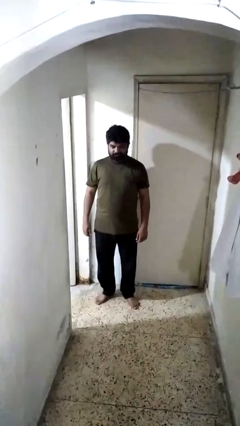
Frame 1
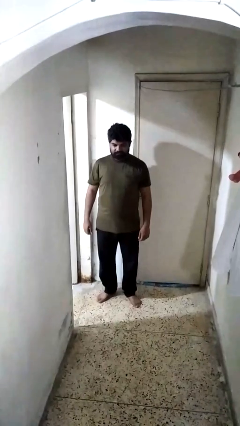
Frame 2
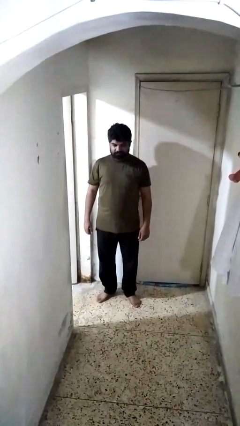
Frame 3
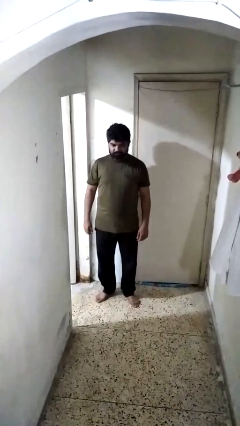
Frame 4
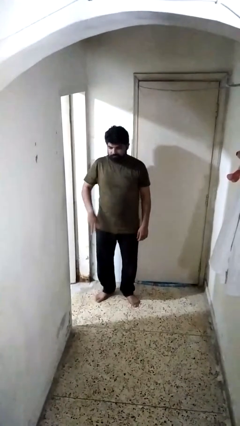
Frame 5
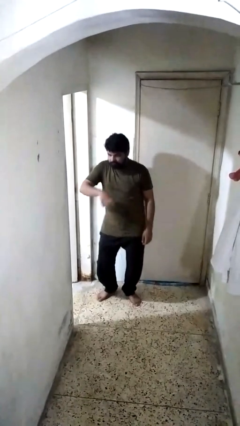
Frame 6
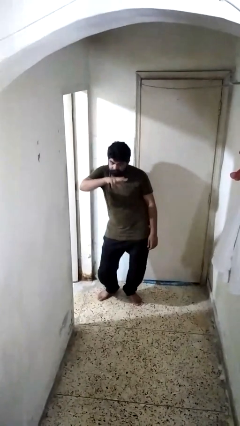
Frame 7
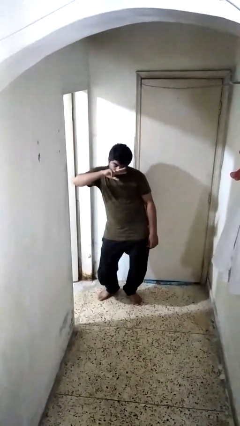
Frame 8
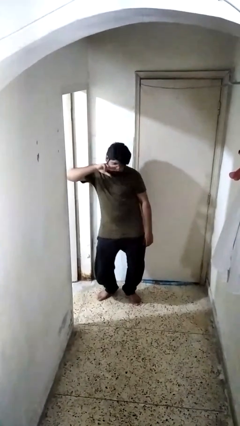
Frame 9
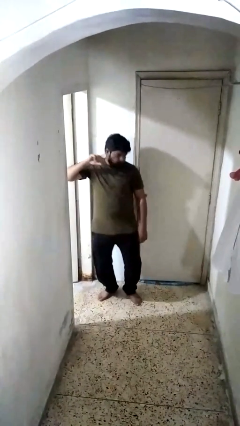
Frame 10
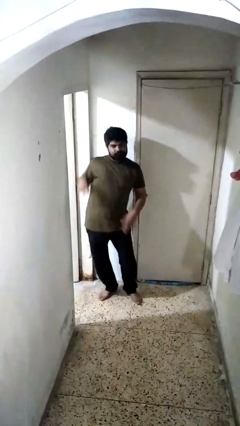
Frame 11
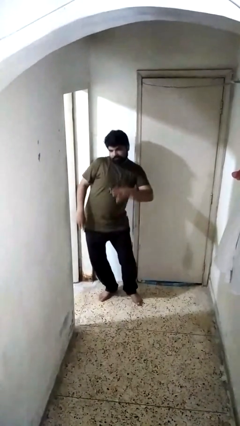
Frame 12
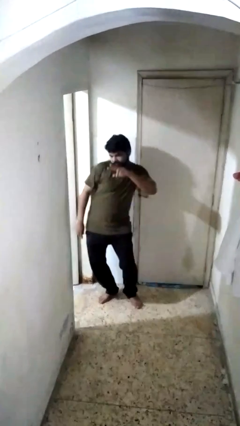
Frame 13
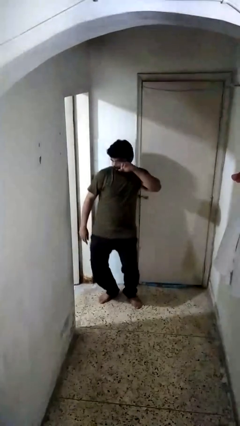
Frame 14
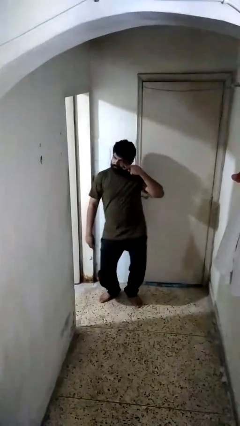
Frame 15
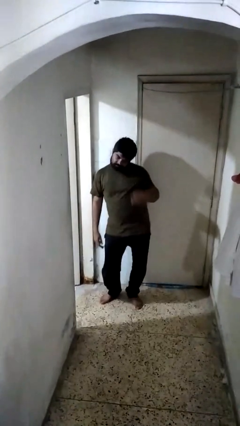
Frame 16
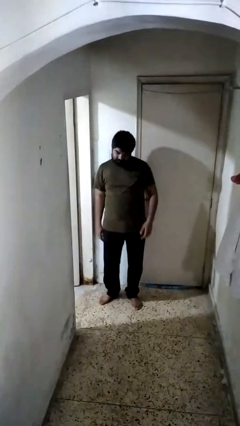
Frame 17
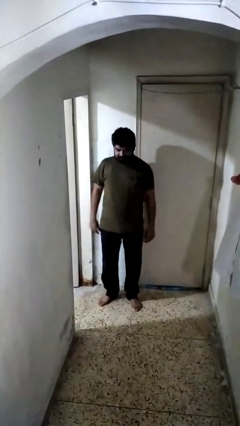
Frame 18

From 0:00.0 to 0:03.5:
person dances in place

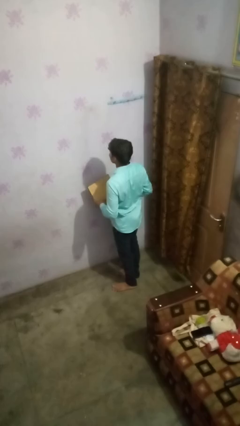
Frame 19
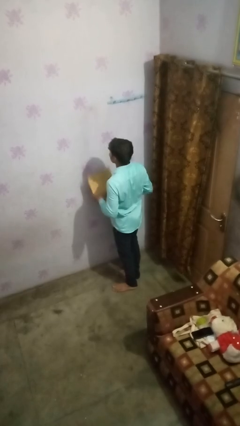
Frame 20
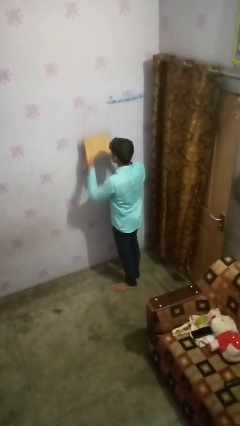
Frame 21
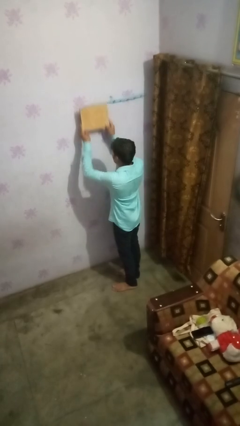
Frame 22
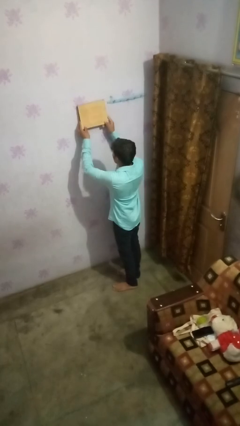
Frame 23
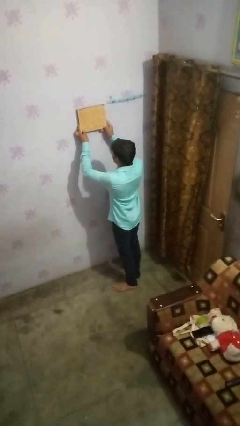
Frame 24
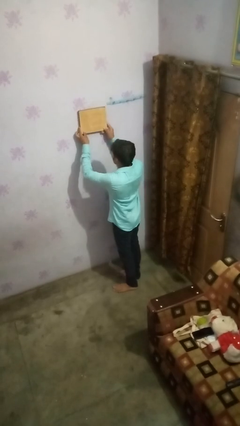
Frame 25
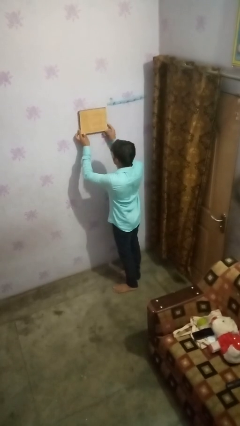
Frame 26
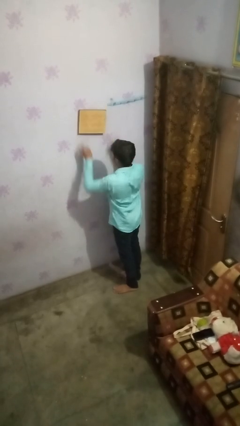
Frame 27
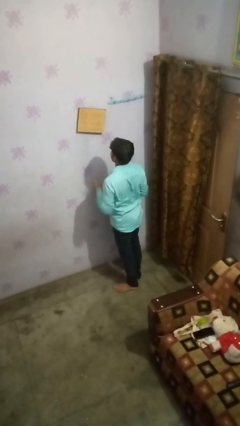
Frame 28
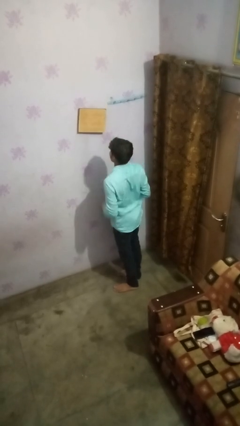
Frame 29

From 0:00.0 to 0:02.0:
person puts up picture frame

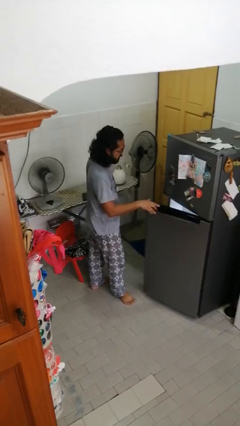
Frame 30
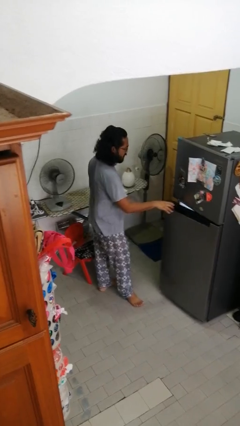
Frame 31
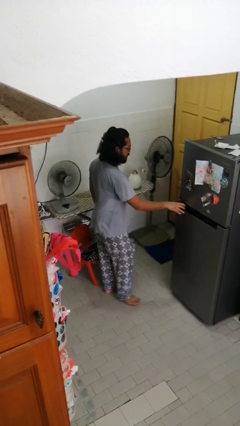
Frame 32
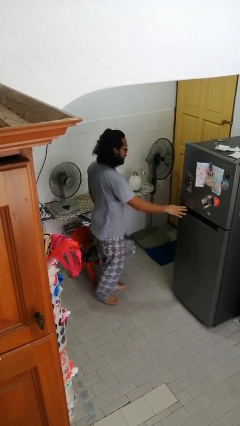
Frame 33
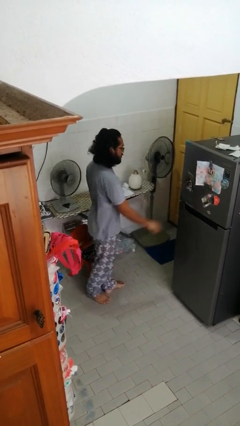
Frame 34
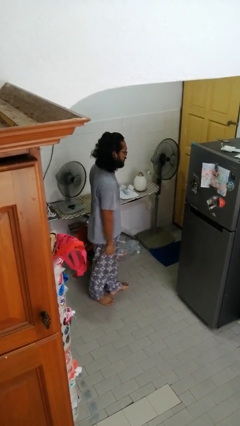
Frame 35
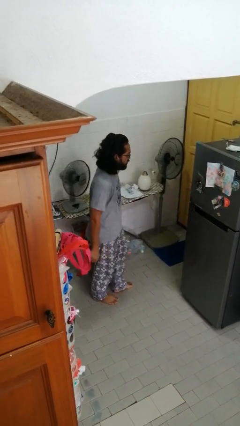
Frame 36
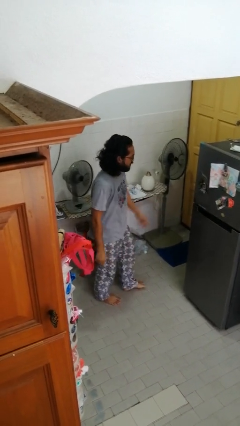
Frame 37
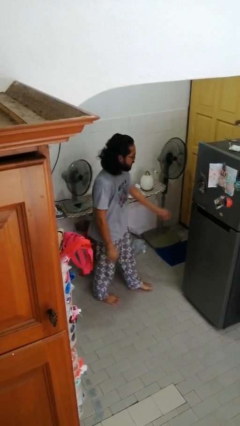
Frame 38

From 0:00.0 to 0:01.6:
person closes refrigerator

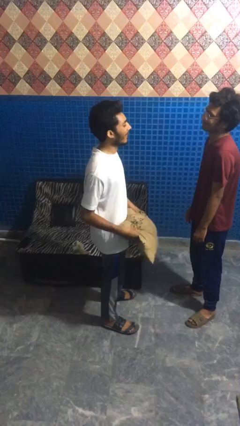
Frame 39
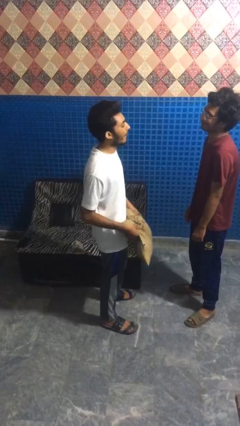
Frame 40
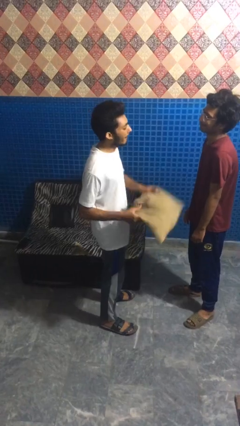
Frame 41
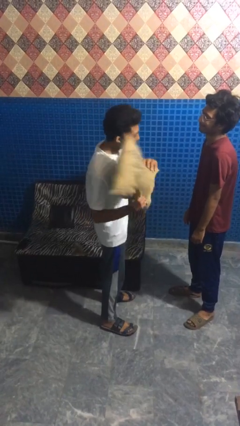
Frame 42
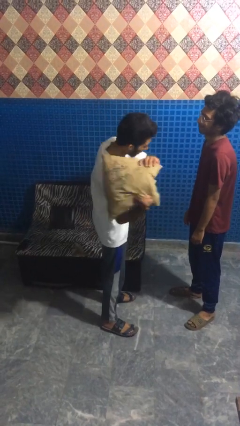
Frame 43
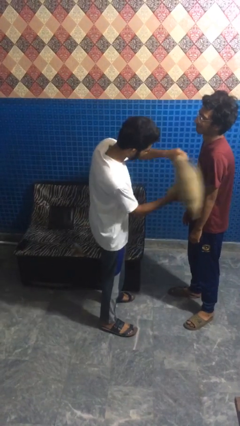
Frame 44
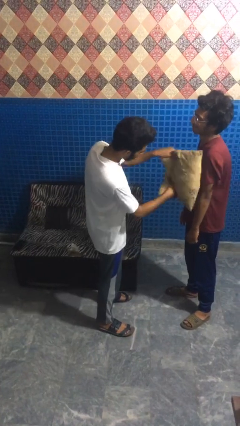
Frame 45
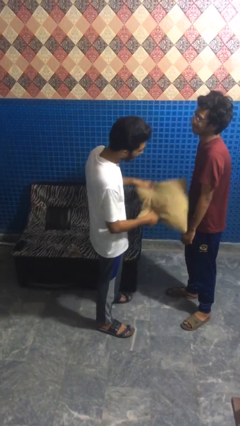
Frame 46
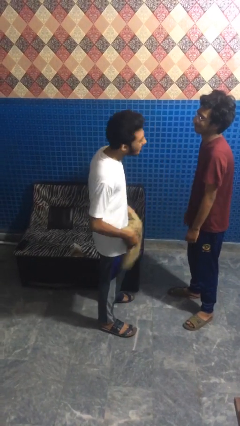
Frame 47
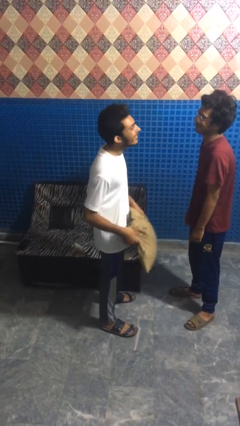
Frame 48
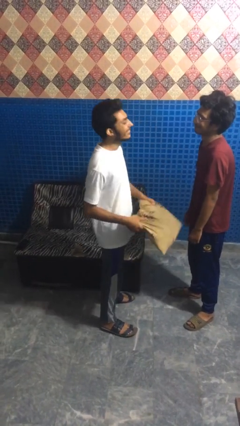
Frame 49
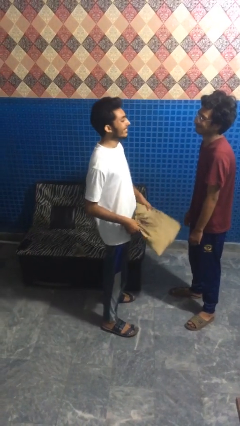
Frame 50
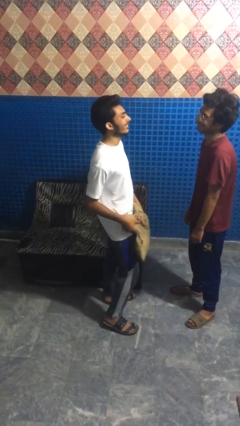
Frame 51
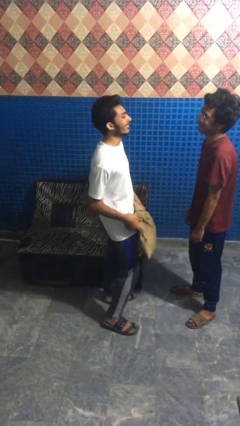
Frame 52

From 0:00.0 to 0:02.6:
person hits person with pillow

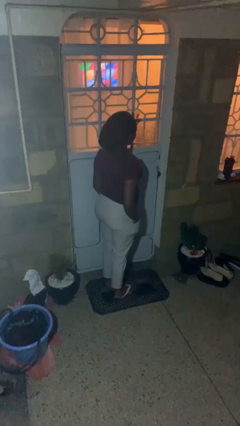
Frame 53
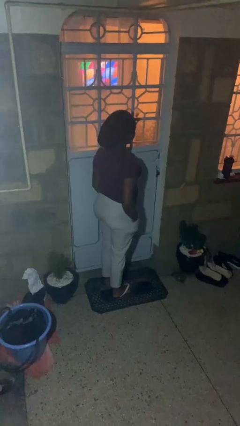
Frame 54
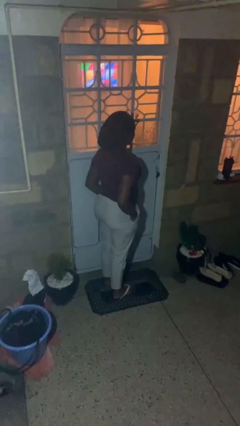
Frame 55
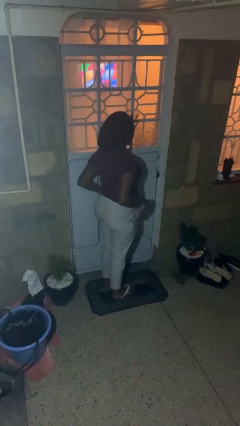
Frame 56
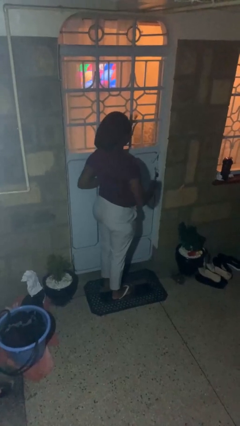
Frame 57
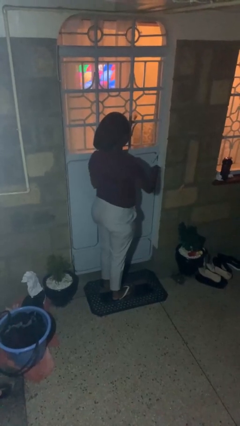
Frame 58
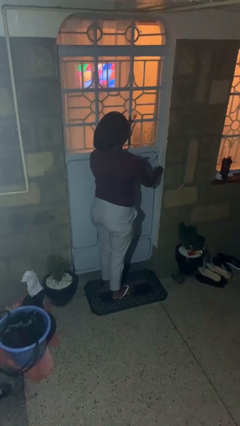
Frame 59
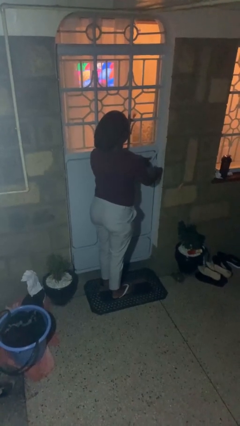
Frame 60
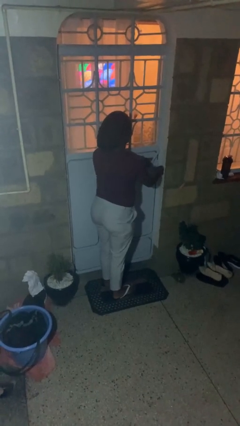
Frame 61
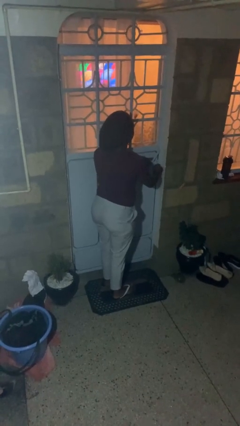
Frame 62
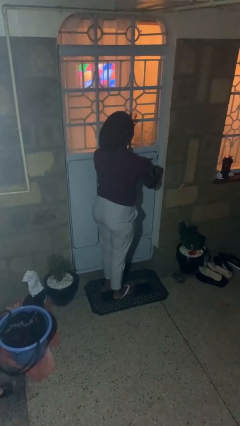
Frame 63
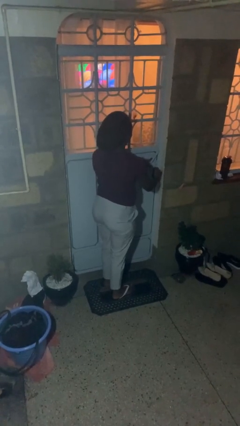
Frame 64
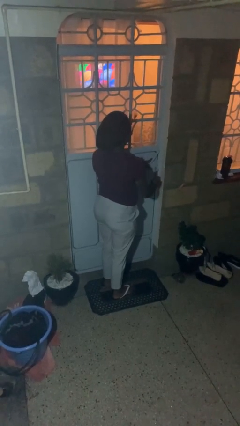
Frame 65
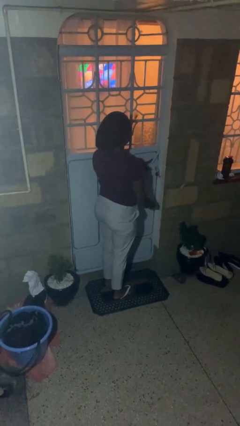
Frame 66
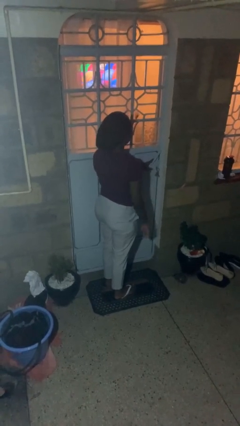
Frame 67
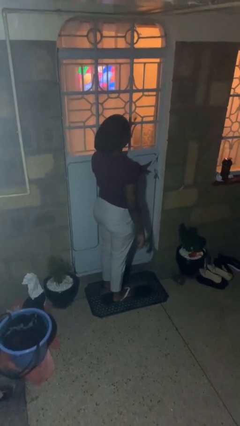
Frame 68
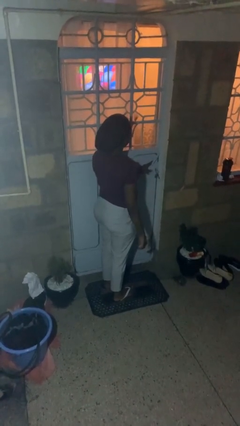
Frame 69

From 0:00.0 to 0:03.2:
person unlocks door with keys

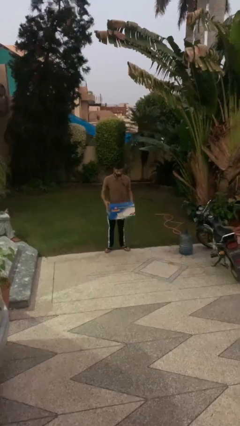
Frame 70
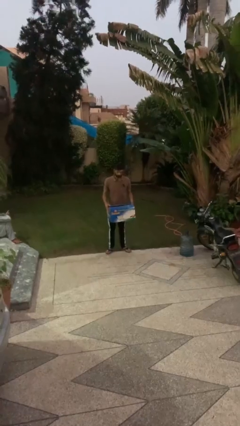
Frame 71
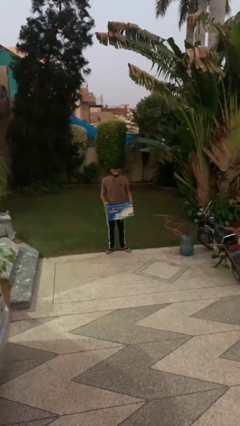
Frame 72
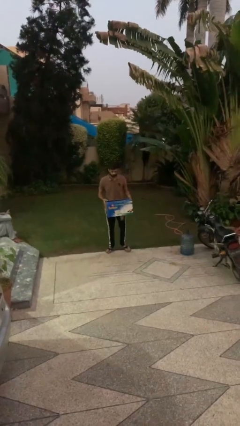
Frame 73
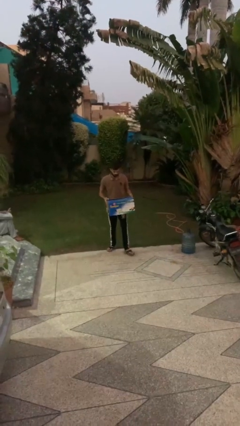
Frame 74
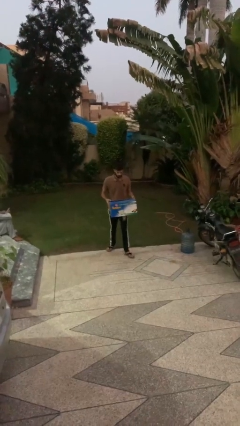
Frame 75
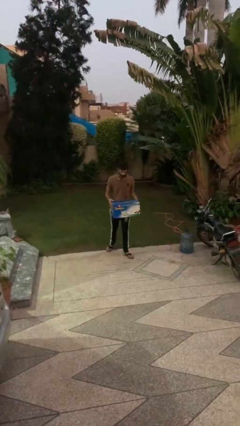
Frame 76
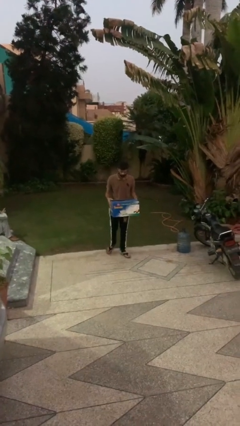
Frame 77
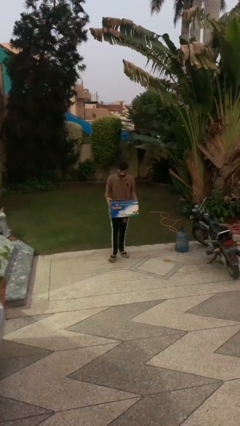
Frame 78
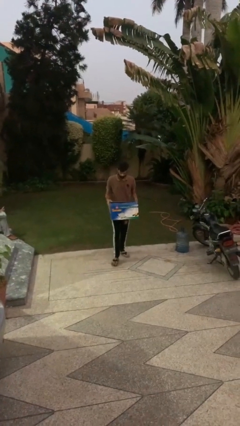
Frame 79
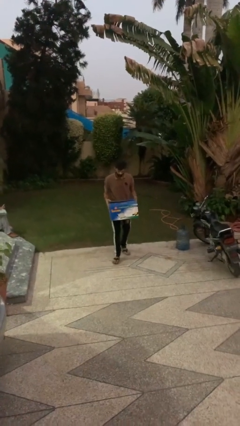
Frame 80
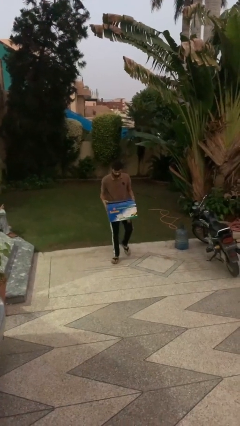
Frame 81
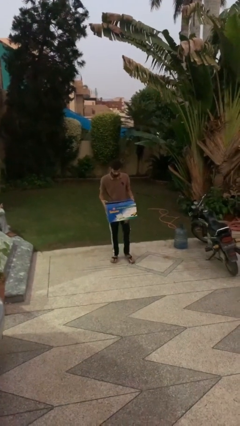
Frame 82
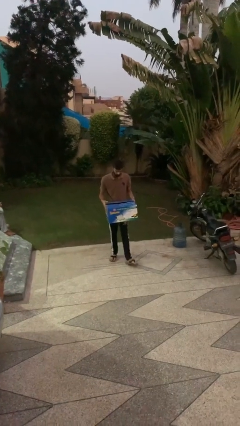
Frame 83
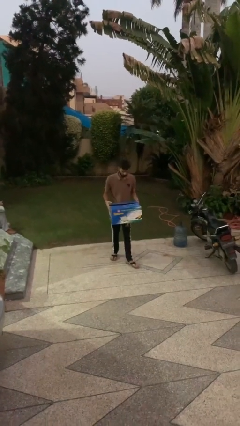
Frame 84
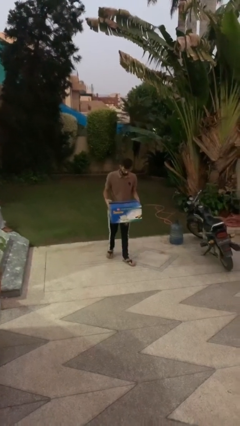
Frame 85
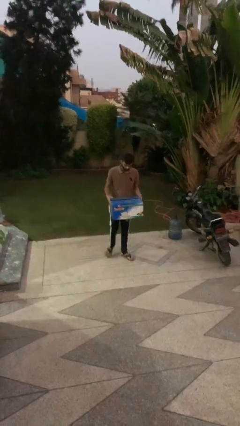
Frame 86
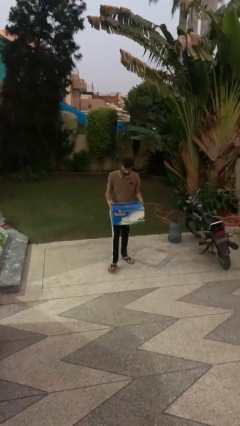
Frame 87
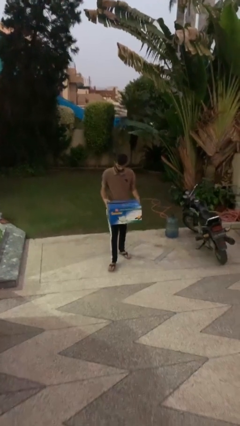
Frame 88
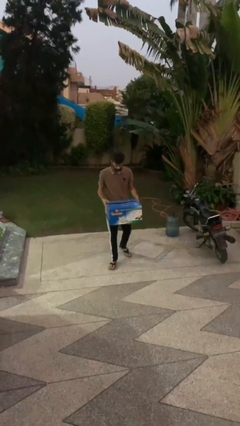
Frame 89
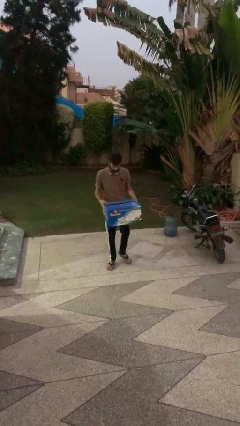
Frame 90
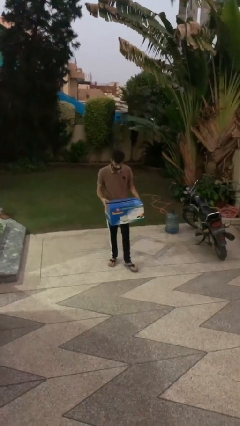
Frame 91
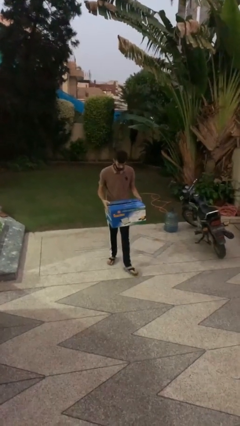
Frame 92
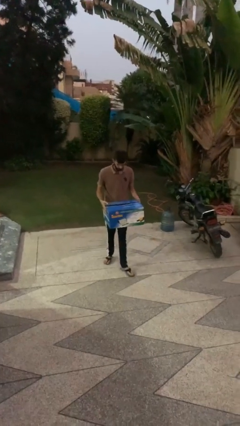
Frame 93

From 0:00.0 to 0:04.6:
person carries heavy object

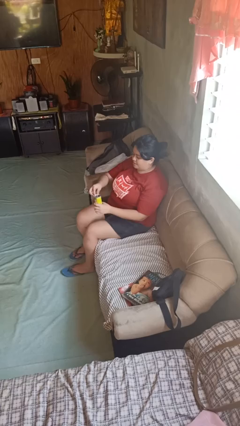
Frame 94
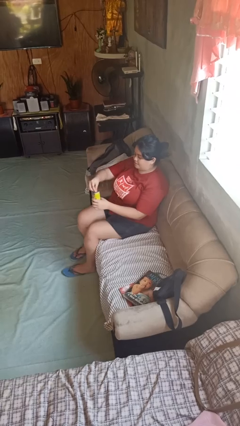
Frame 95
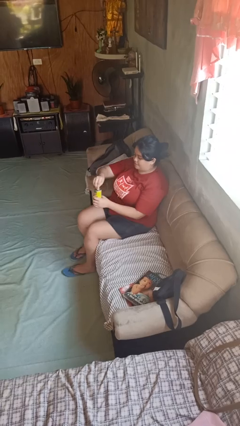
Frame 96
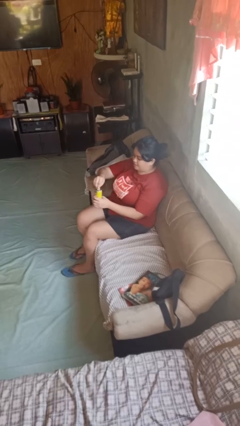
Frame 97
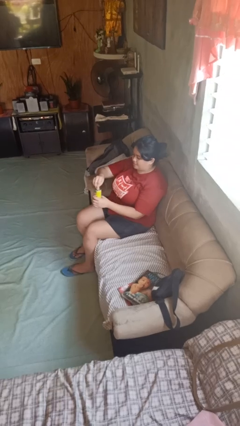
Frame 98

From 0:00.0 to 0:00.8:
person opens beverage can
